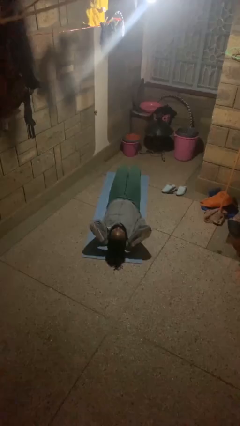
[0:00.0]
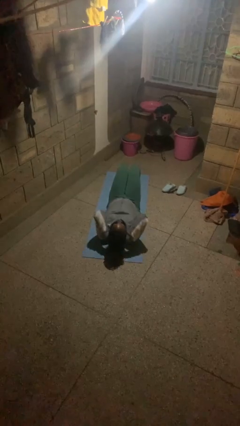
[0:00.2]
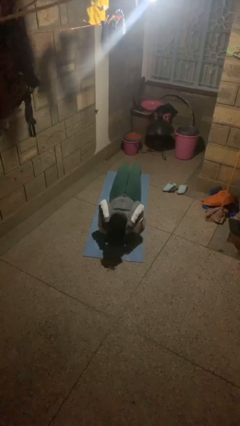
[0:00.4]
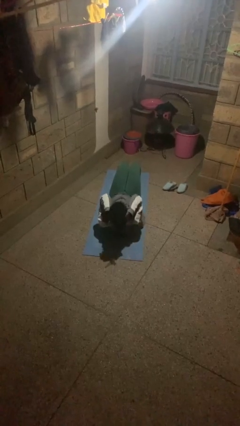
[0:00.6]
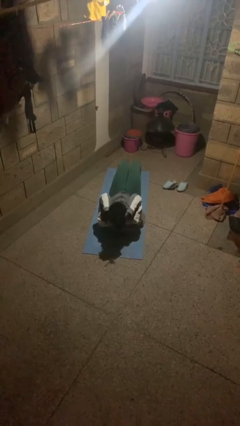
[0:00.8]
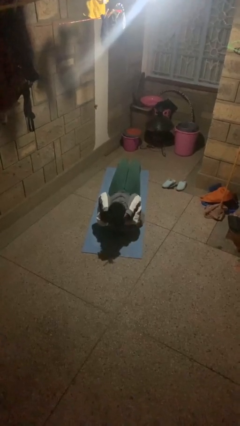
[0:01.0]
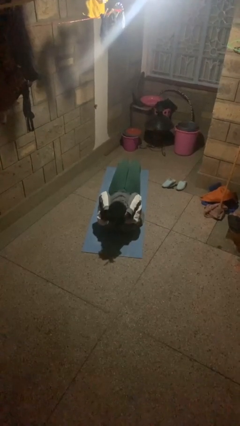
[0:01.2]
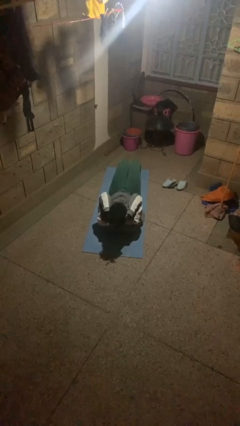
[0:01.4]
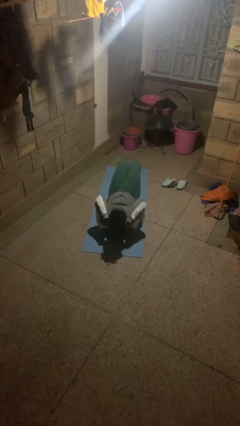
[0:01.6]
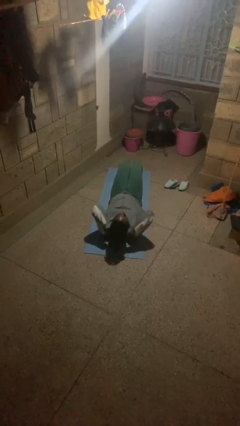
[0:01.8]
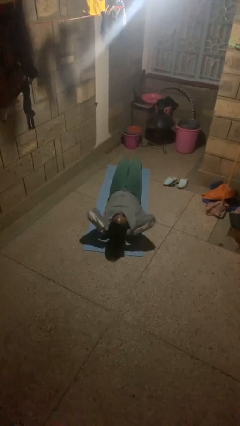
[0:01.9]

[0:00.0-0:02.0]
person exercises with situp

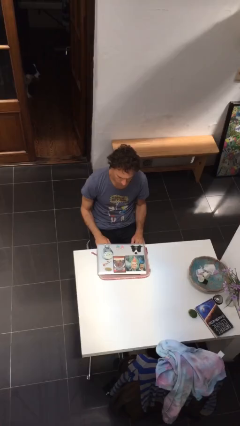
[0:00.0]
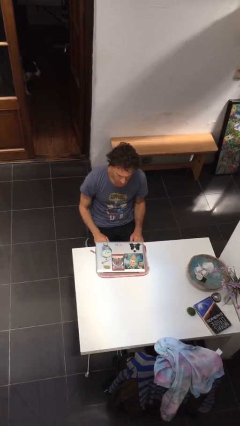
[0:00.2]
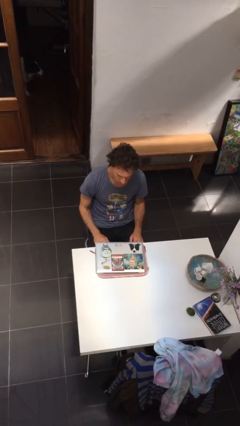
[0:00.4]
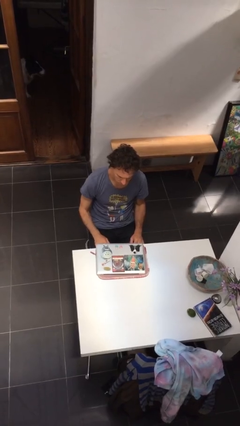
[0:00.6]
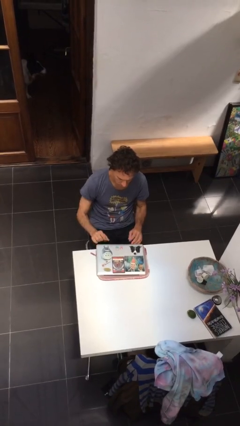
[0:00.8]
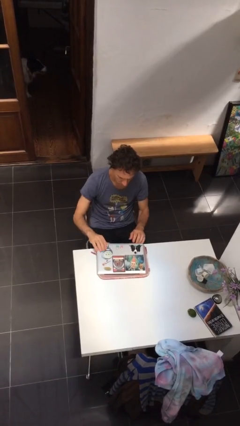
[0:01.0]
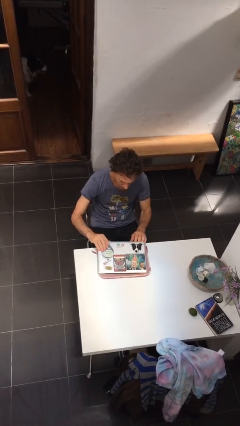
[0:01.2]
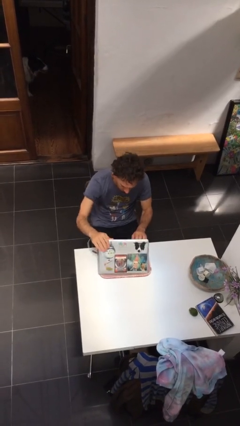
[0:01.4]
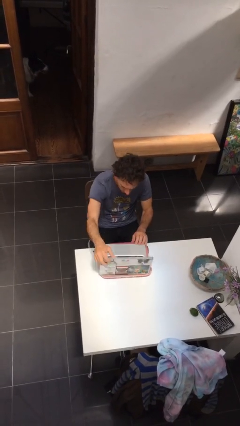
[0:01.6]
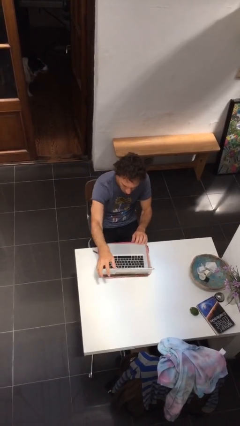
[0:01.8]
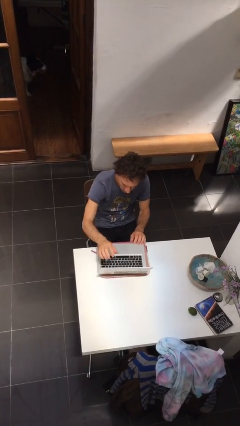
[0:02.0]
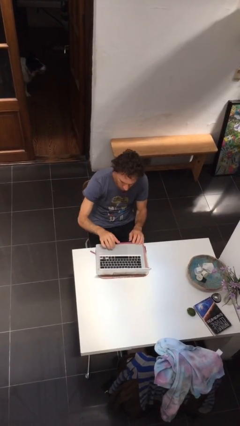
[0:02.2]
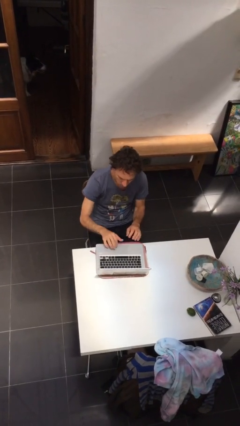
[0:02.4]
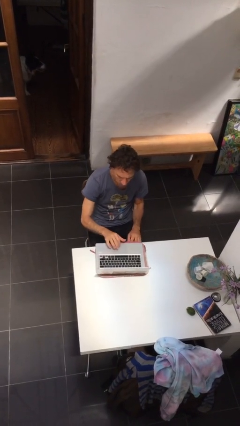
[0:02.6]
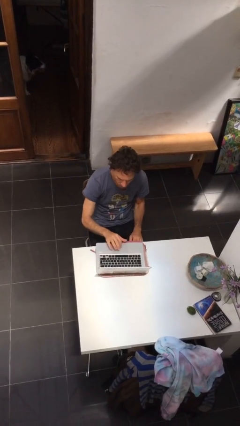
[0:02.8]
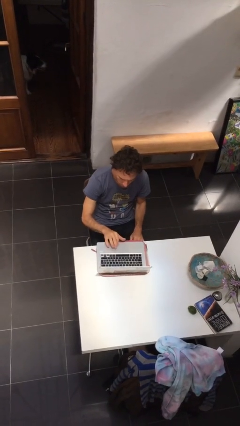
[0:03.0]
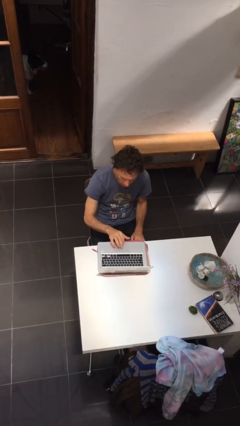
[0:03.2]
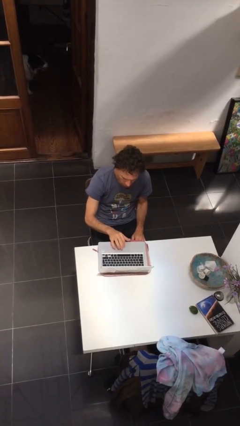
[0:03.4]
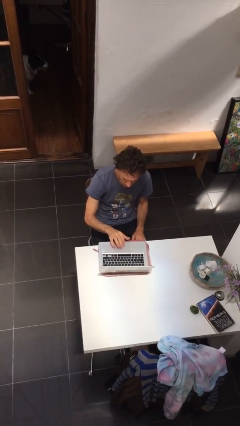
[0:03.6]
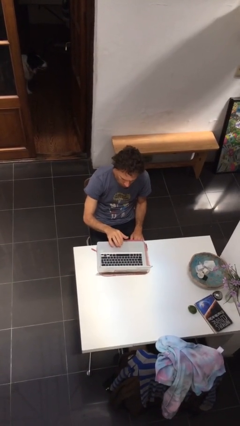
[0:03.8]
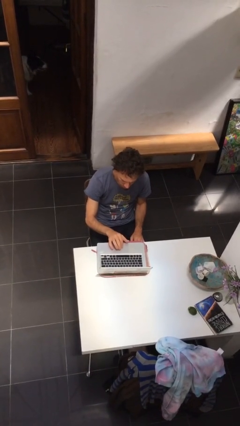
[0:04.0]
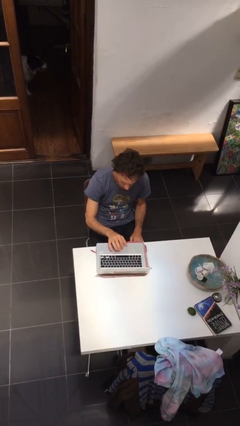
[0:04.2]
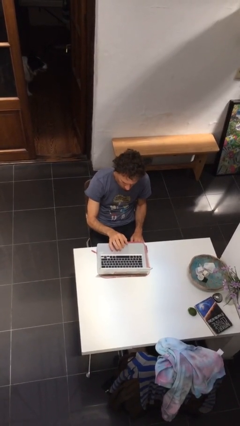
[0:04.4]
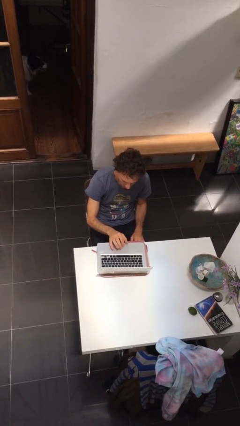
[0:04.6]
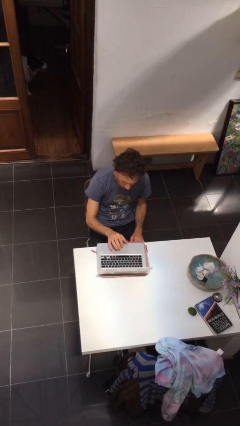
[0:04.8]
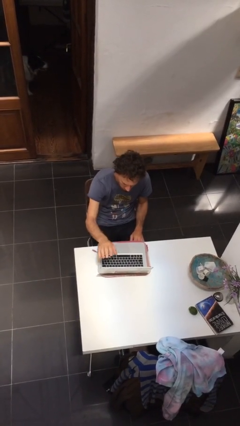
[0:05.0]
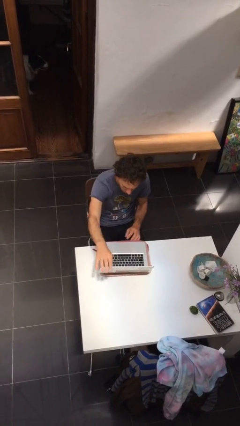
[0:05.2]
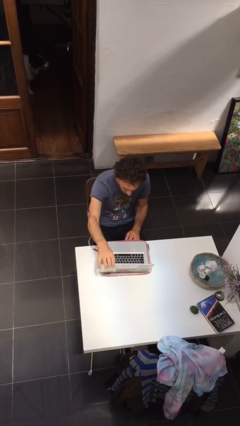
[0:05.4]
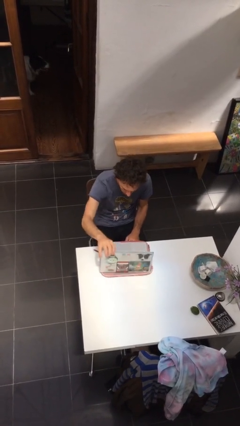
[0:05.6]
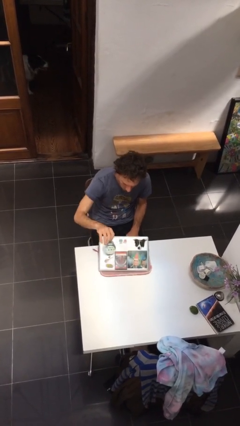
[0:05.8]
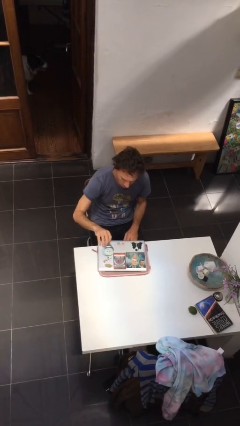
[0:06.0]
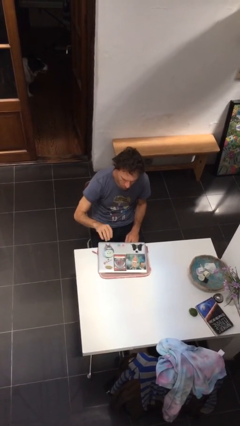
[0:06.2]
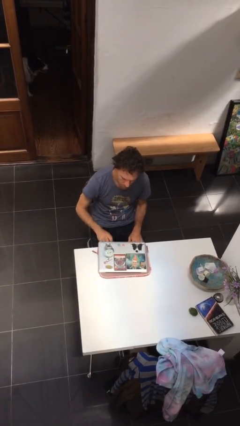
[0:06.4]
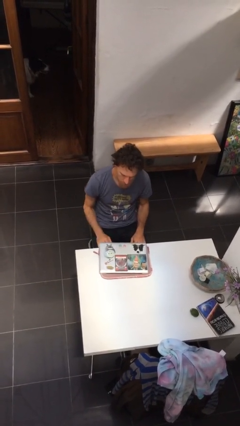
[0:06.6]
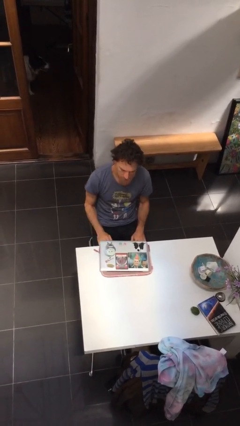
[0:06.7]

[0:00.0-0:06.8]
person interacts with laptop

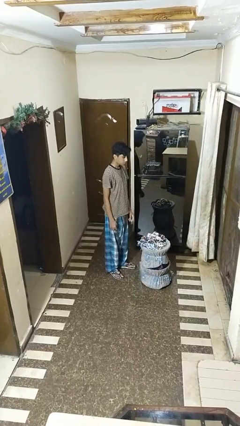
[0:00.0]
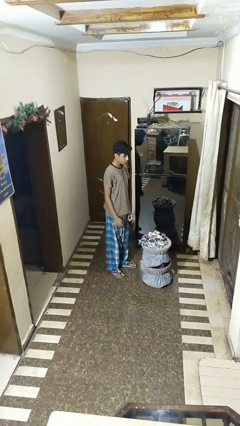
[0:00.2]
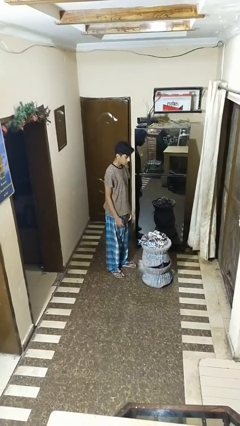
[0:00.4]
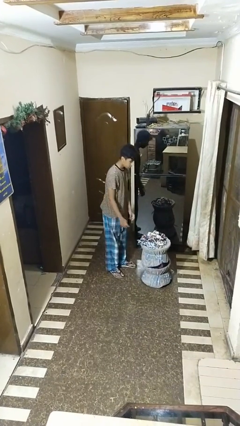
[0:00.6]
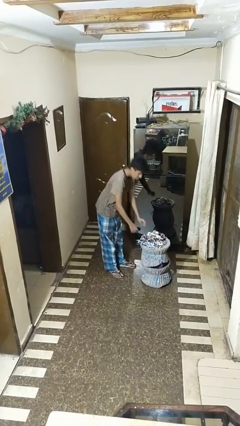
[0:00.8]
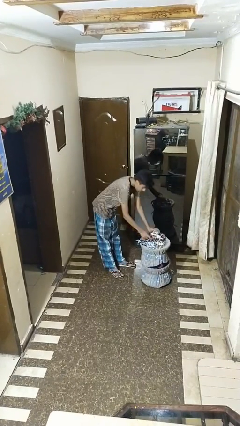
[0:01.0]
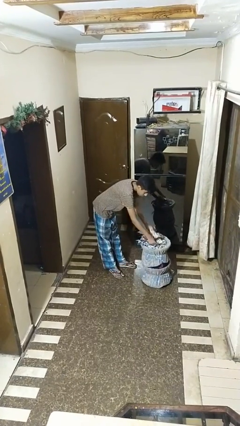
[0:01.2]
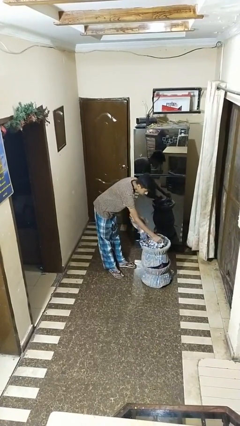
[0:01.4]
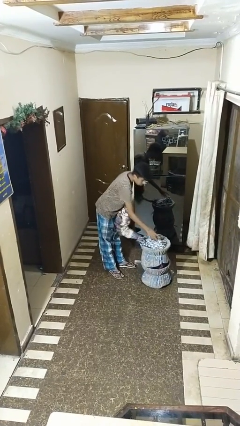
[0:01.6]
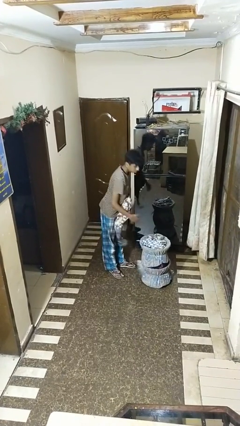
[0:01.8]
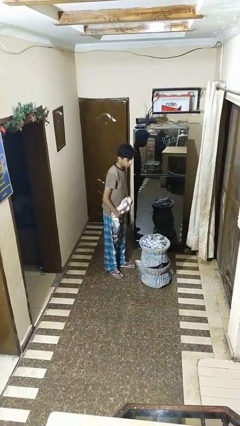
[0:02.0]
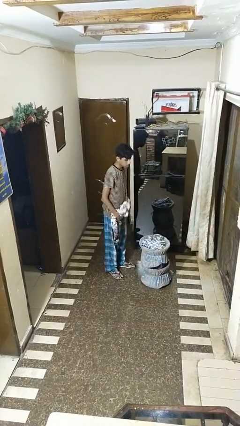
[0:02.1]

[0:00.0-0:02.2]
person takes object from basket

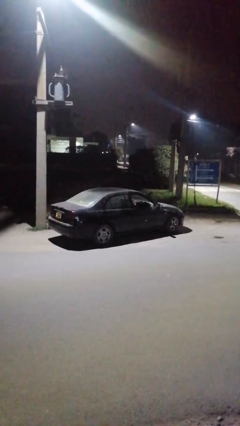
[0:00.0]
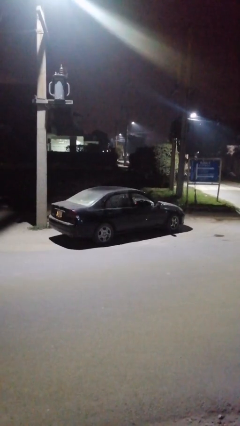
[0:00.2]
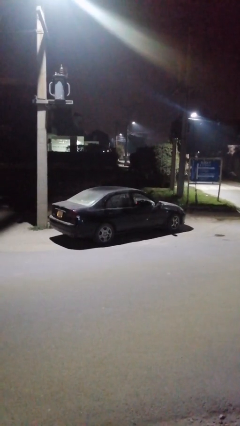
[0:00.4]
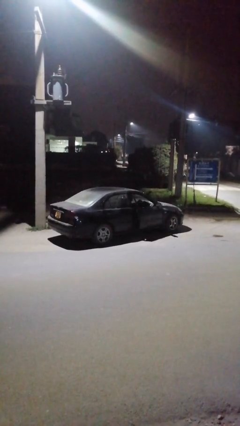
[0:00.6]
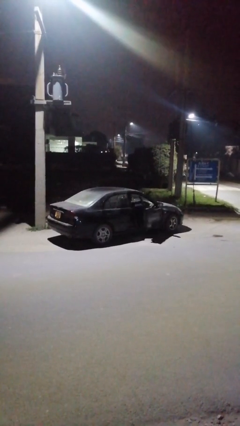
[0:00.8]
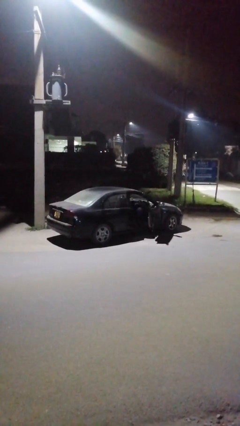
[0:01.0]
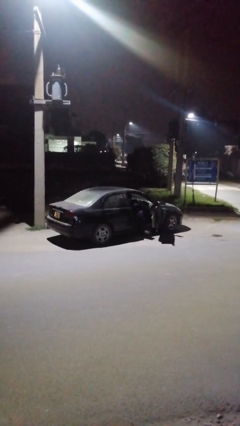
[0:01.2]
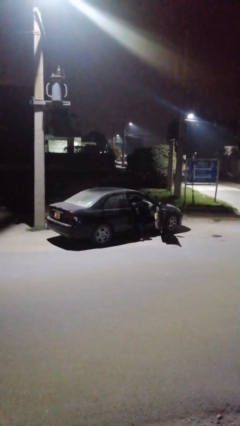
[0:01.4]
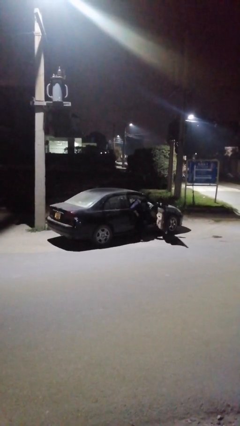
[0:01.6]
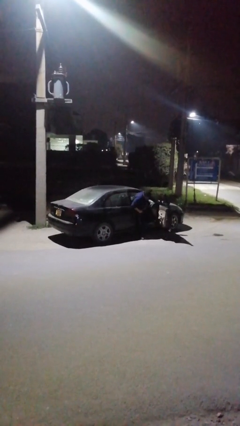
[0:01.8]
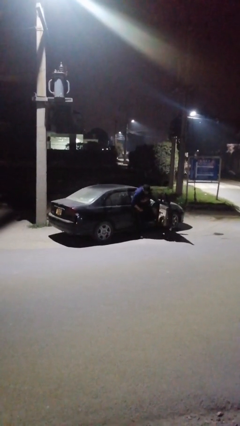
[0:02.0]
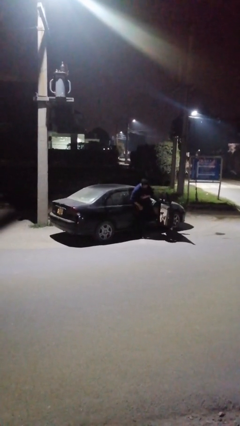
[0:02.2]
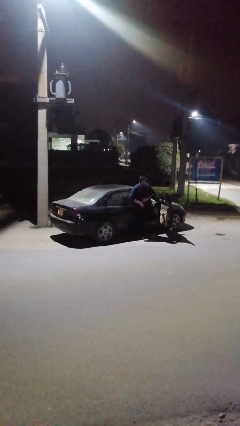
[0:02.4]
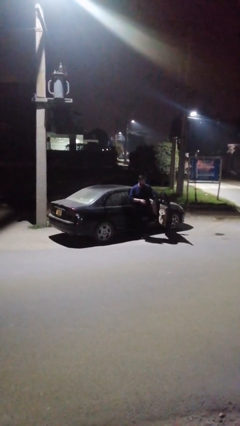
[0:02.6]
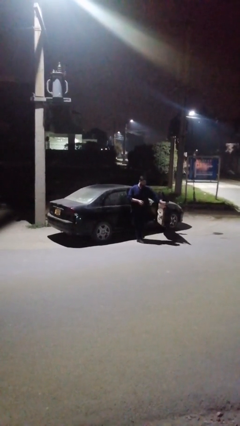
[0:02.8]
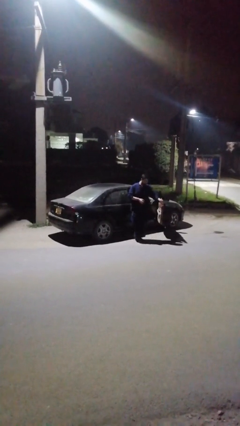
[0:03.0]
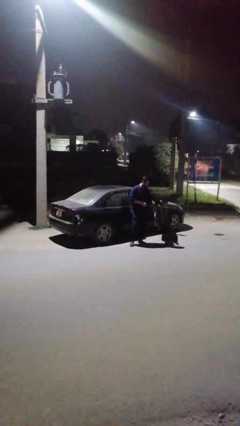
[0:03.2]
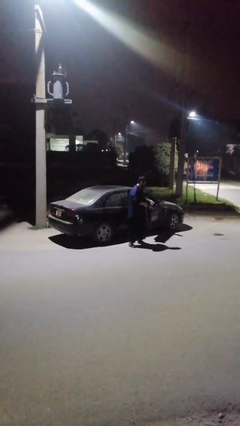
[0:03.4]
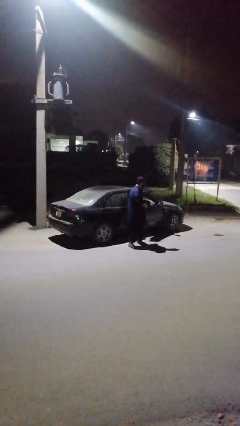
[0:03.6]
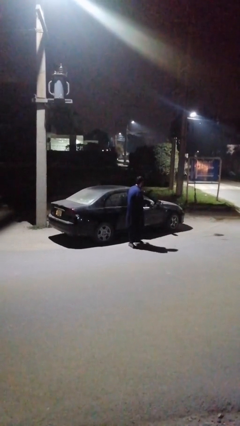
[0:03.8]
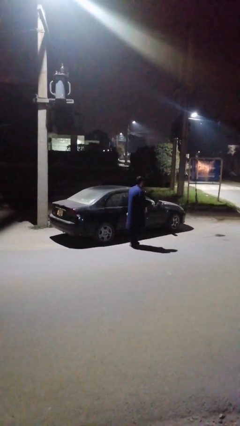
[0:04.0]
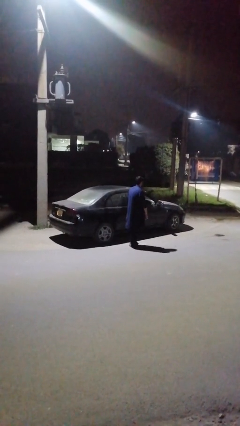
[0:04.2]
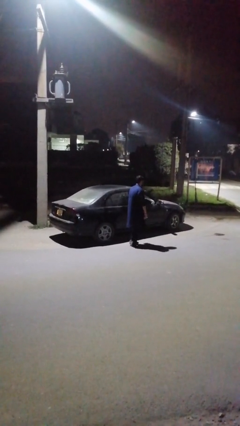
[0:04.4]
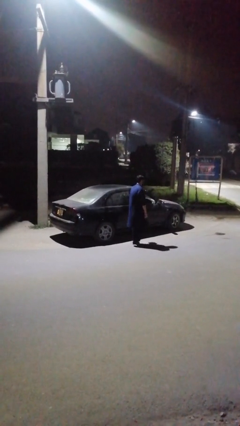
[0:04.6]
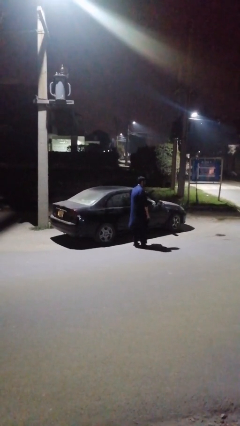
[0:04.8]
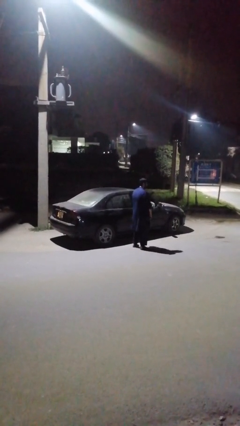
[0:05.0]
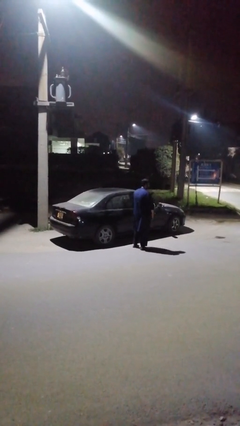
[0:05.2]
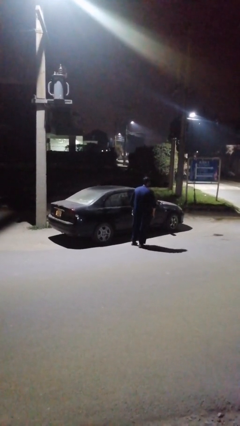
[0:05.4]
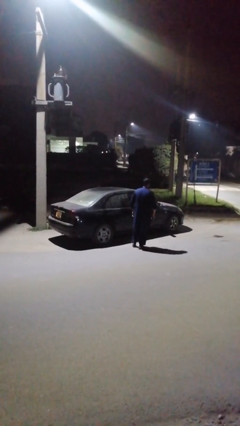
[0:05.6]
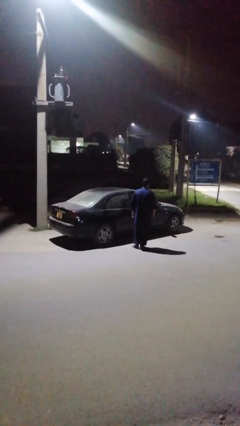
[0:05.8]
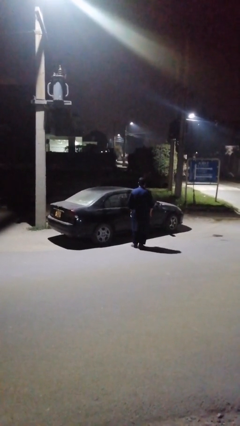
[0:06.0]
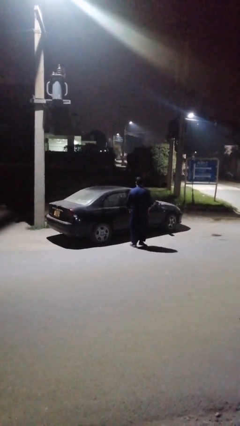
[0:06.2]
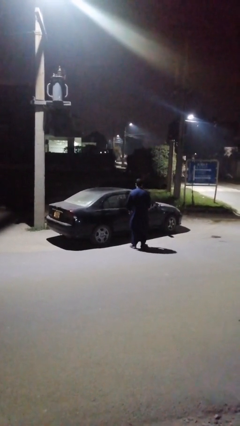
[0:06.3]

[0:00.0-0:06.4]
car drops off person

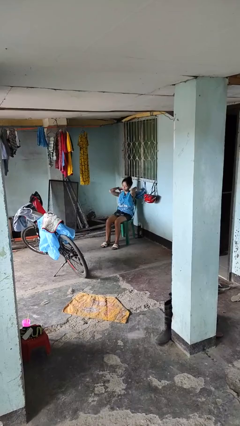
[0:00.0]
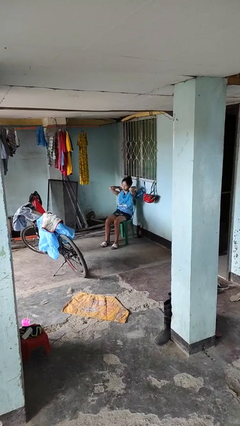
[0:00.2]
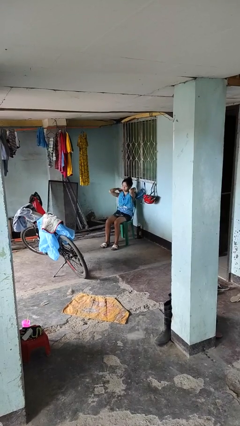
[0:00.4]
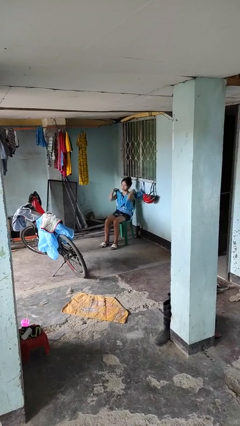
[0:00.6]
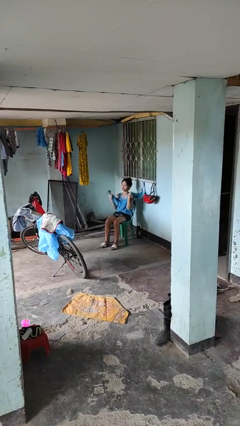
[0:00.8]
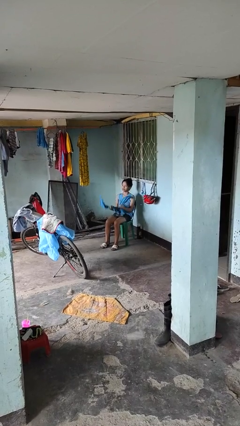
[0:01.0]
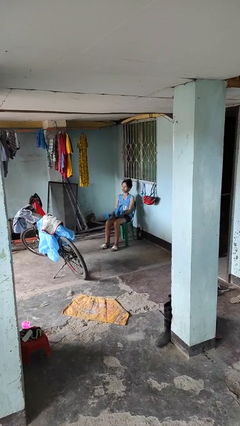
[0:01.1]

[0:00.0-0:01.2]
person takes off scarf
